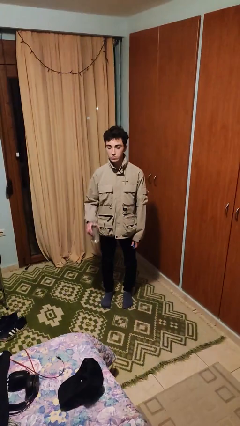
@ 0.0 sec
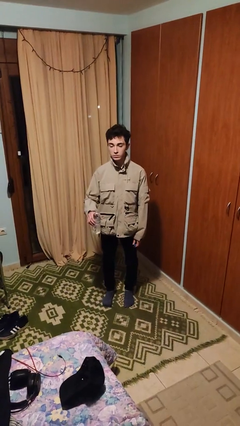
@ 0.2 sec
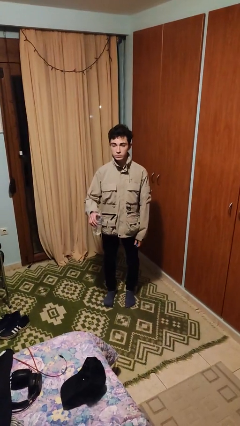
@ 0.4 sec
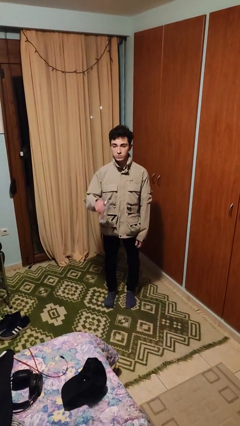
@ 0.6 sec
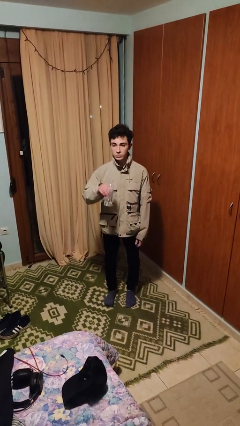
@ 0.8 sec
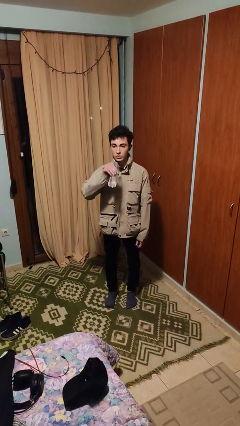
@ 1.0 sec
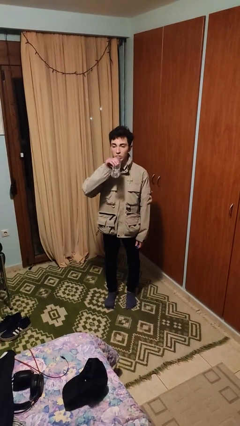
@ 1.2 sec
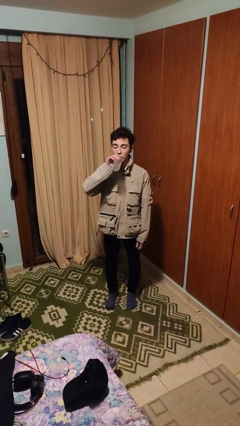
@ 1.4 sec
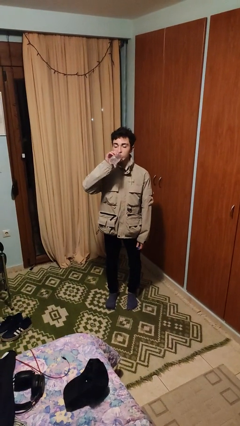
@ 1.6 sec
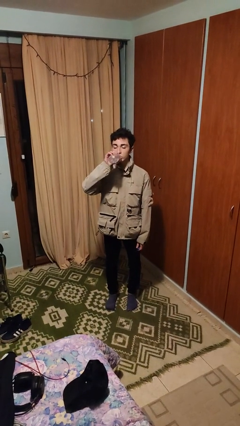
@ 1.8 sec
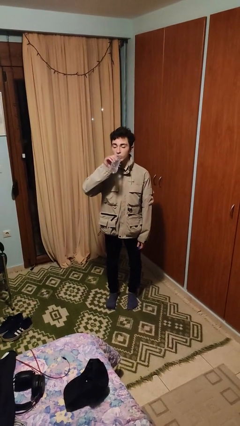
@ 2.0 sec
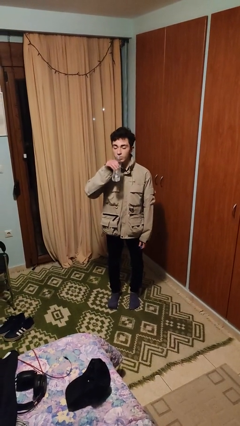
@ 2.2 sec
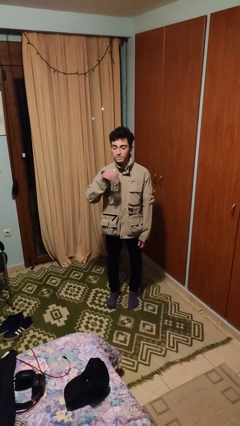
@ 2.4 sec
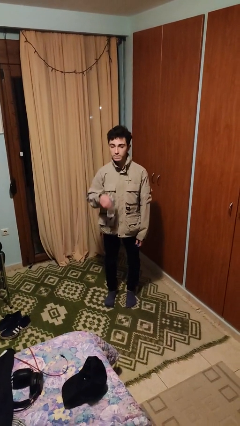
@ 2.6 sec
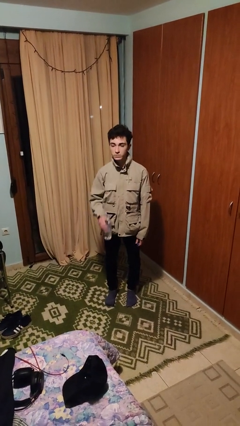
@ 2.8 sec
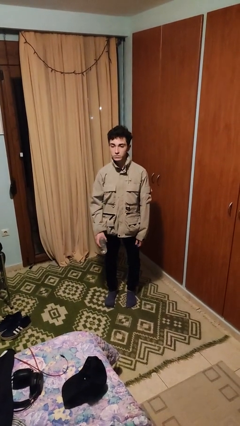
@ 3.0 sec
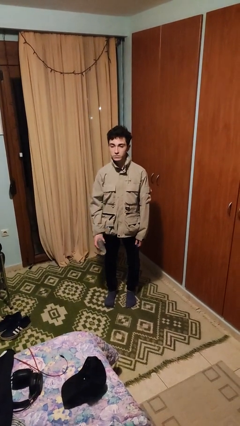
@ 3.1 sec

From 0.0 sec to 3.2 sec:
person drinks from bottle

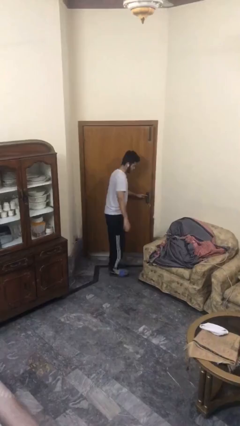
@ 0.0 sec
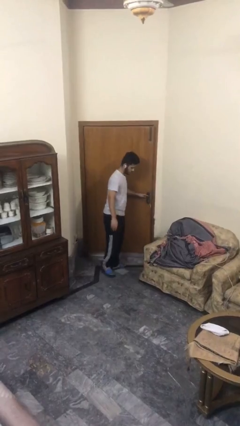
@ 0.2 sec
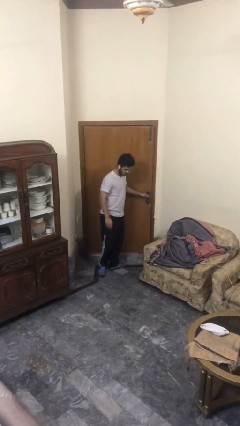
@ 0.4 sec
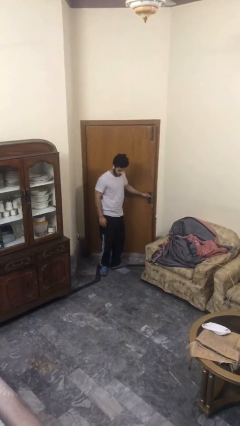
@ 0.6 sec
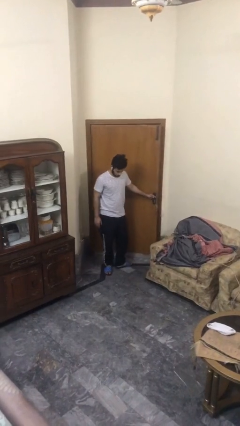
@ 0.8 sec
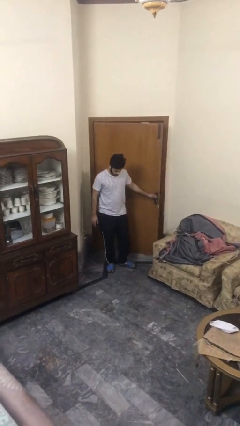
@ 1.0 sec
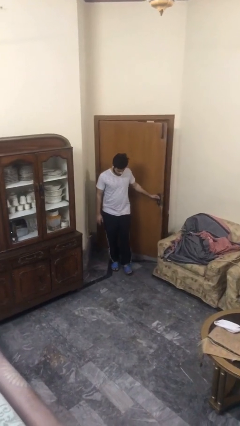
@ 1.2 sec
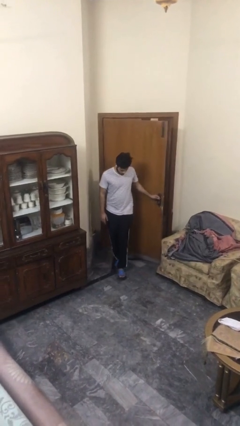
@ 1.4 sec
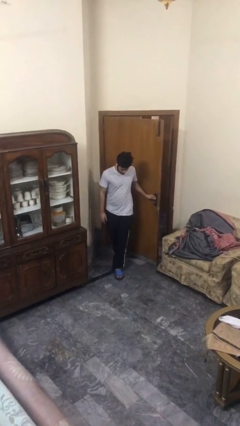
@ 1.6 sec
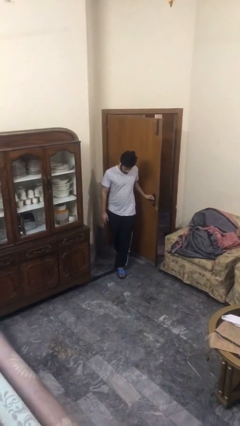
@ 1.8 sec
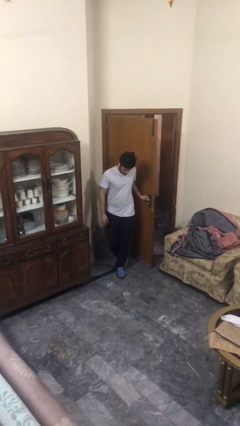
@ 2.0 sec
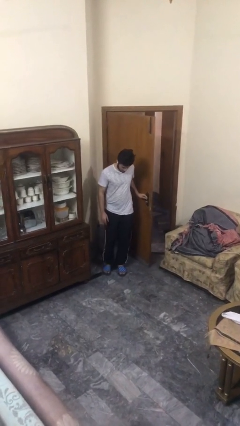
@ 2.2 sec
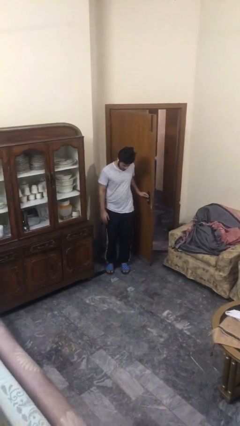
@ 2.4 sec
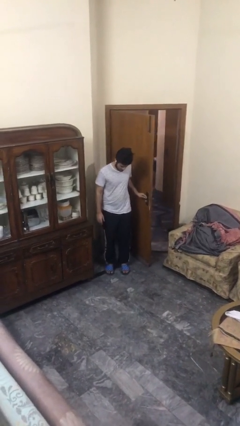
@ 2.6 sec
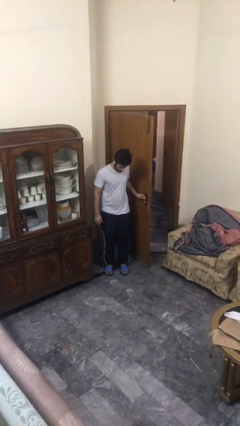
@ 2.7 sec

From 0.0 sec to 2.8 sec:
person opens facility door

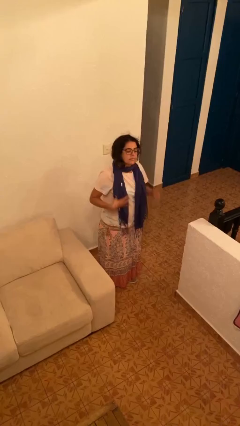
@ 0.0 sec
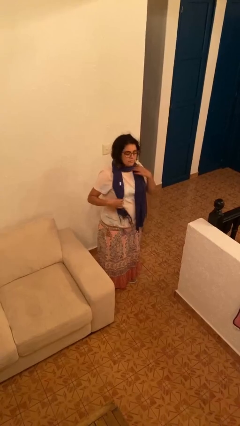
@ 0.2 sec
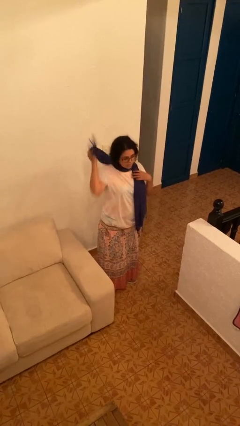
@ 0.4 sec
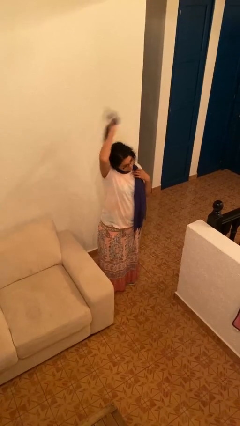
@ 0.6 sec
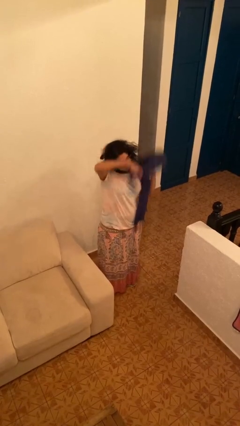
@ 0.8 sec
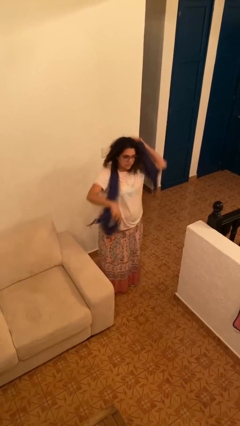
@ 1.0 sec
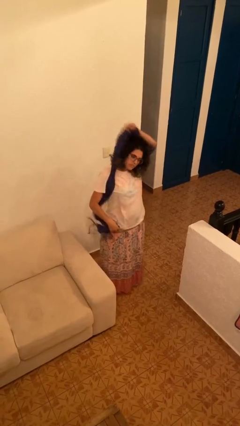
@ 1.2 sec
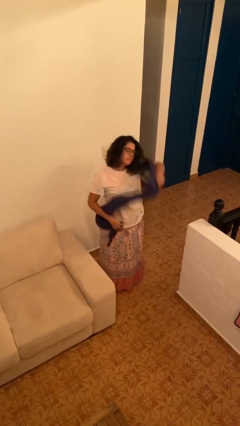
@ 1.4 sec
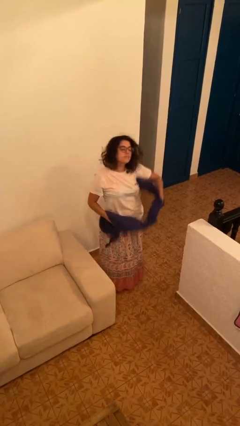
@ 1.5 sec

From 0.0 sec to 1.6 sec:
person takes off scarf

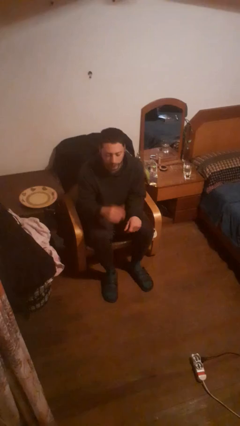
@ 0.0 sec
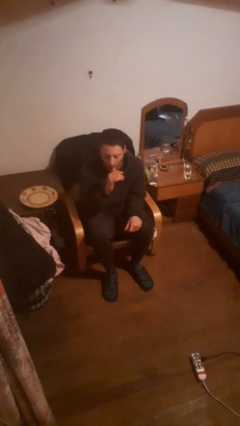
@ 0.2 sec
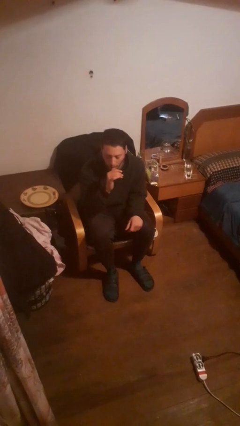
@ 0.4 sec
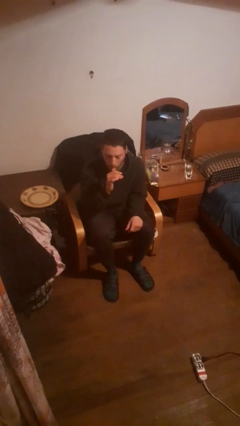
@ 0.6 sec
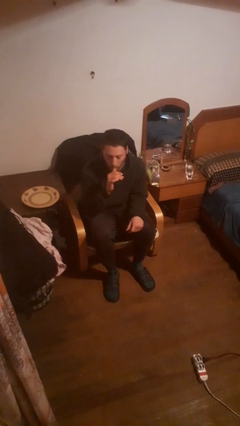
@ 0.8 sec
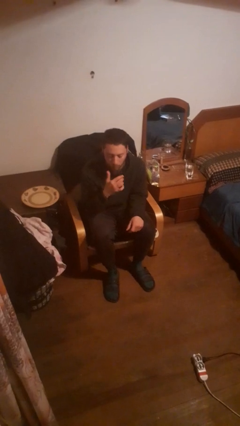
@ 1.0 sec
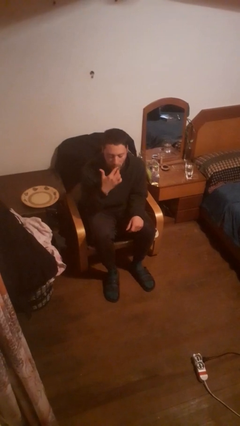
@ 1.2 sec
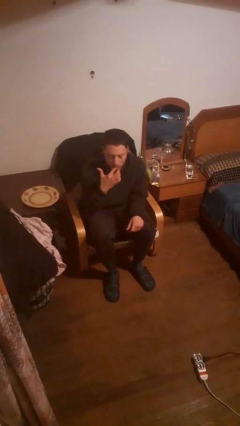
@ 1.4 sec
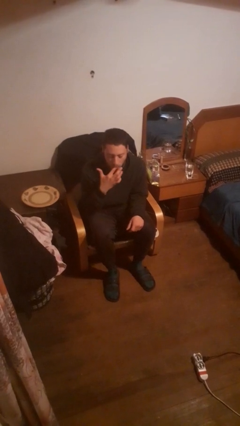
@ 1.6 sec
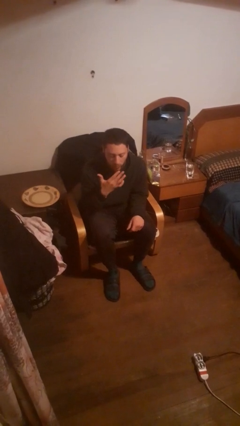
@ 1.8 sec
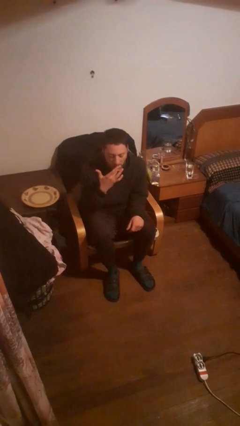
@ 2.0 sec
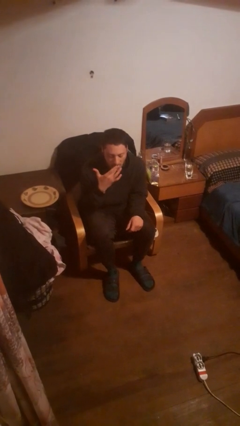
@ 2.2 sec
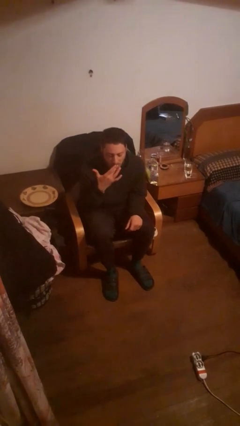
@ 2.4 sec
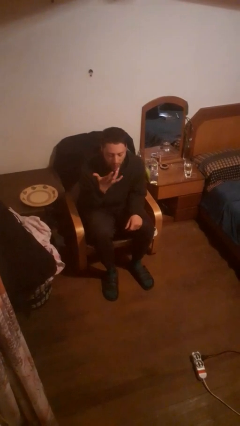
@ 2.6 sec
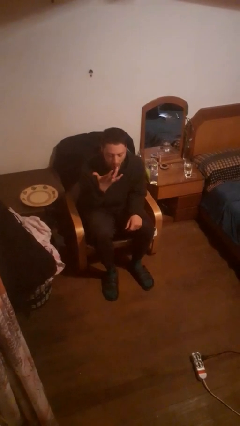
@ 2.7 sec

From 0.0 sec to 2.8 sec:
person licks fingers

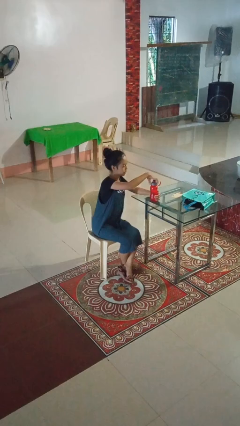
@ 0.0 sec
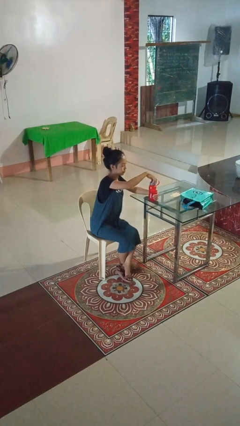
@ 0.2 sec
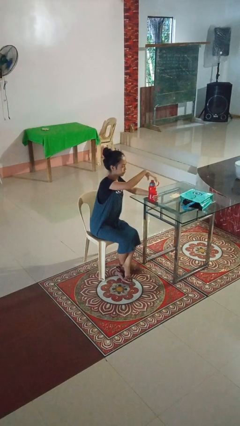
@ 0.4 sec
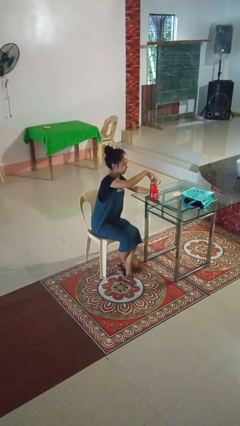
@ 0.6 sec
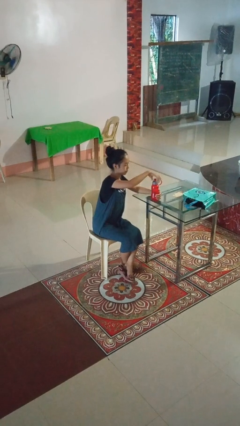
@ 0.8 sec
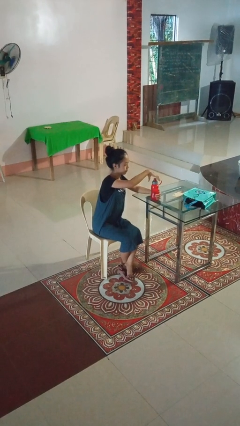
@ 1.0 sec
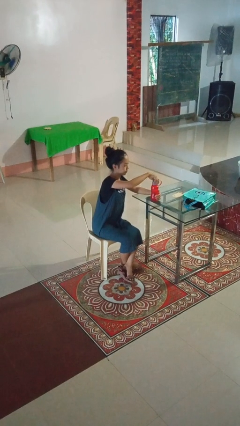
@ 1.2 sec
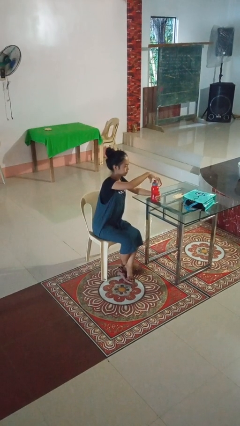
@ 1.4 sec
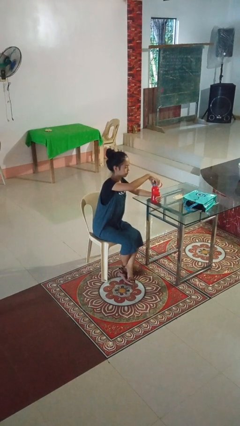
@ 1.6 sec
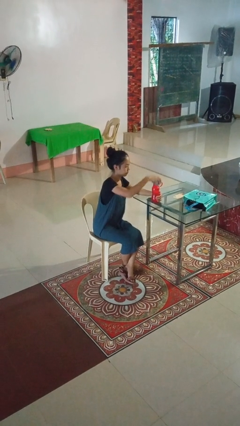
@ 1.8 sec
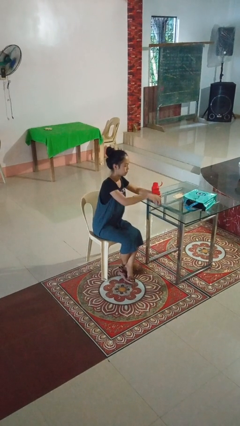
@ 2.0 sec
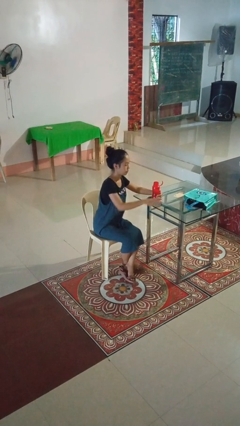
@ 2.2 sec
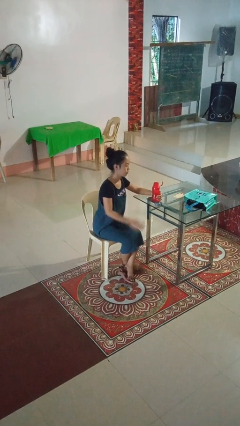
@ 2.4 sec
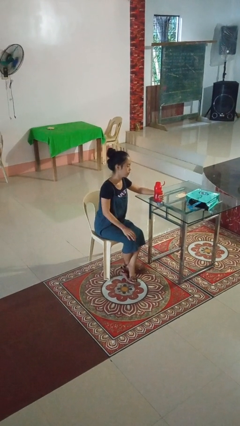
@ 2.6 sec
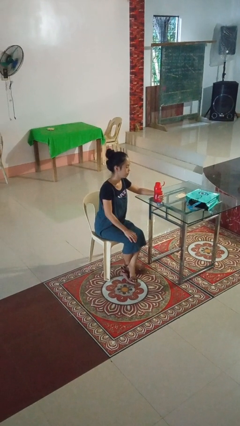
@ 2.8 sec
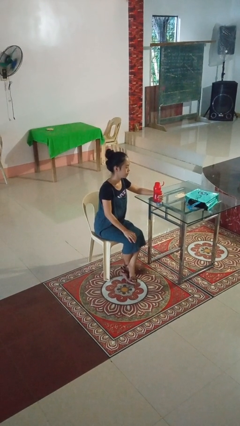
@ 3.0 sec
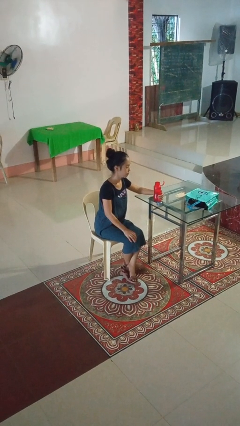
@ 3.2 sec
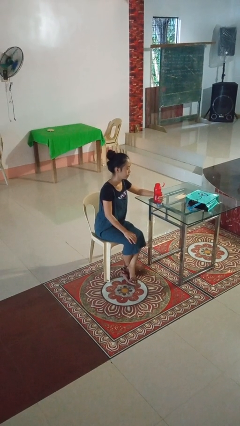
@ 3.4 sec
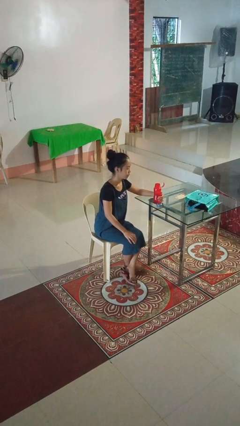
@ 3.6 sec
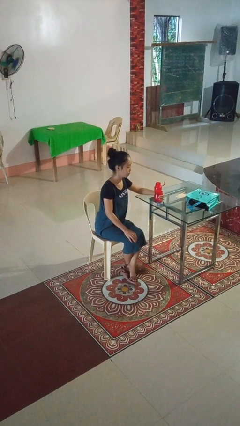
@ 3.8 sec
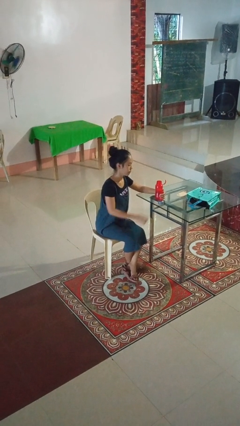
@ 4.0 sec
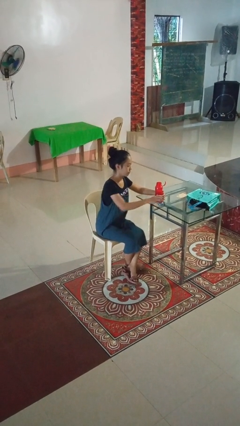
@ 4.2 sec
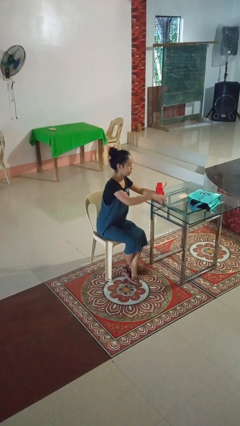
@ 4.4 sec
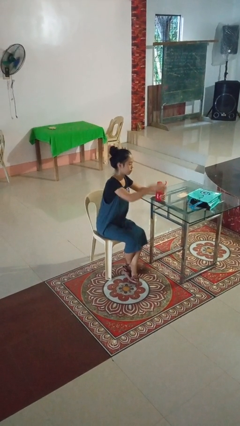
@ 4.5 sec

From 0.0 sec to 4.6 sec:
person unscrews lid from bottle

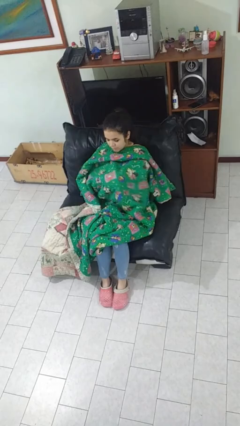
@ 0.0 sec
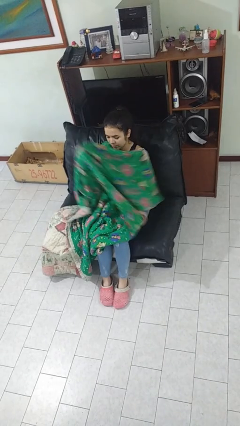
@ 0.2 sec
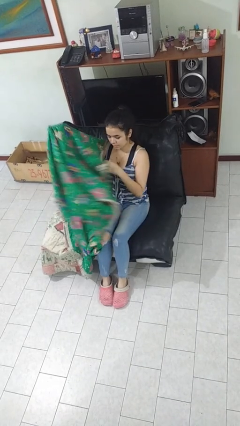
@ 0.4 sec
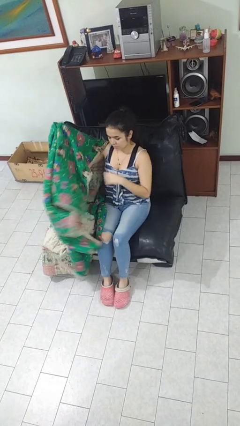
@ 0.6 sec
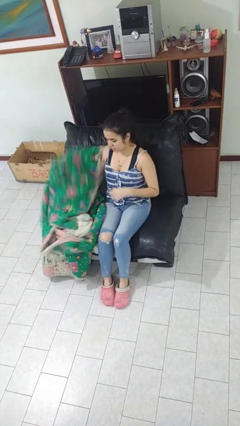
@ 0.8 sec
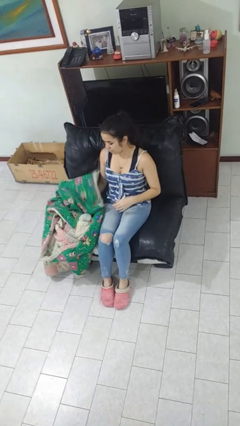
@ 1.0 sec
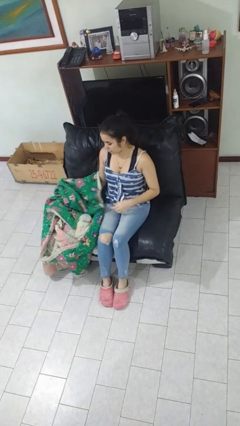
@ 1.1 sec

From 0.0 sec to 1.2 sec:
person uncovers with blanket

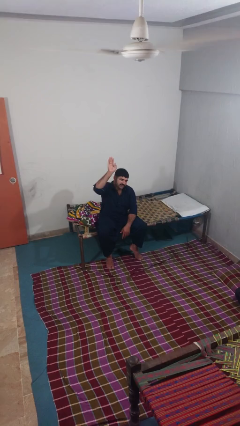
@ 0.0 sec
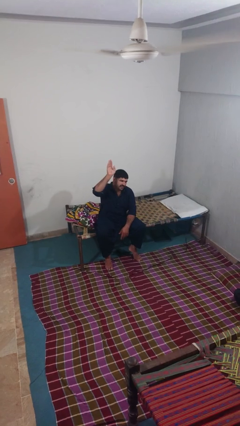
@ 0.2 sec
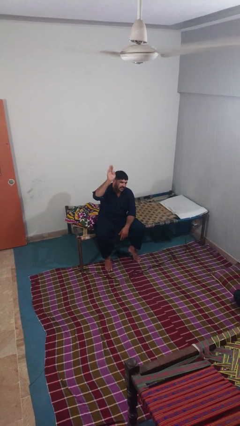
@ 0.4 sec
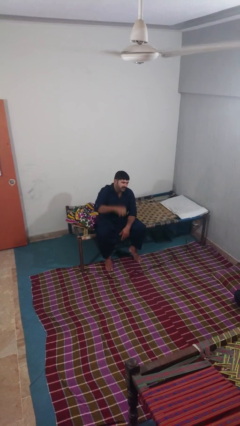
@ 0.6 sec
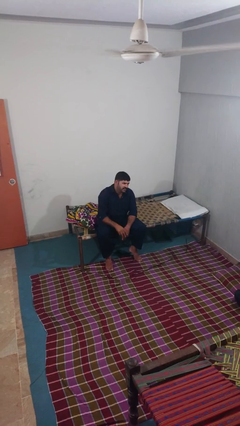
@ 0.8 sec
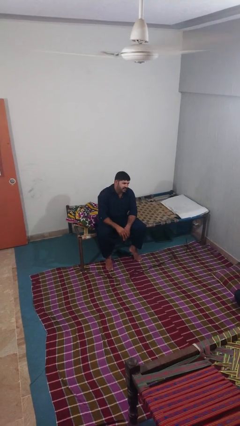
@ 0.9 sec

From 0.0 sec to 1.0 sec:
person gestures swipe down

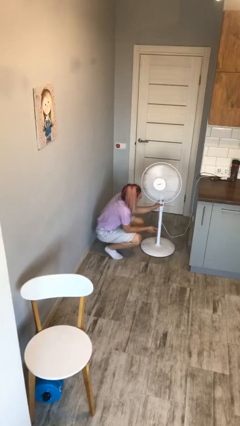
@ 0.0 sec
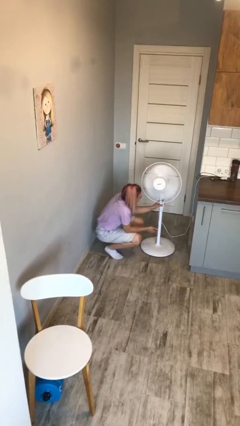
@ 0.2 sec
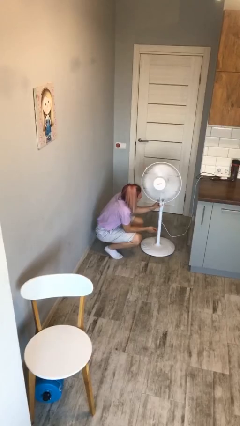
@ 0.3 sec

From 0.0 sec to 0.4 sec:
person turns off fan
